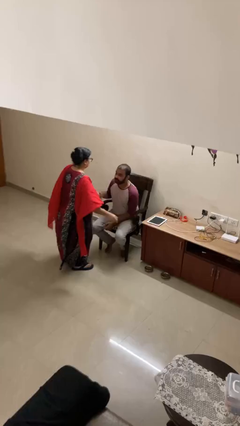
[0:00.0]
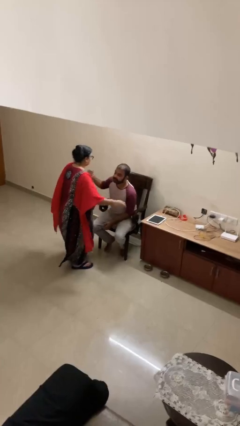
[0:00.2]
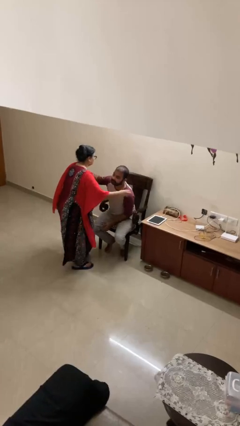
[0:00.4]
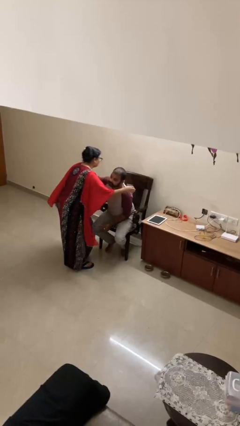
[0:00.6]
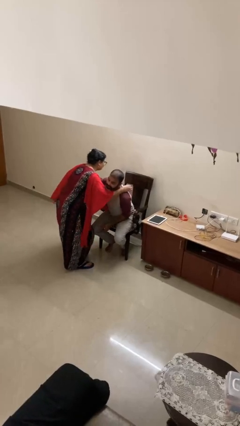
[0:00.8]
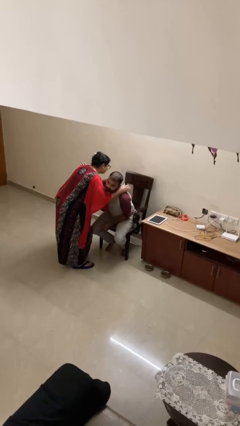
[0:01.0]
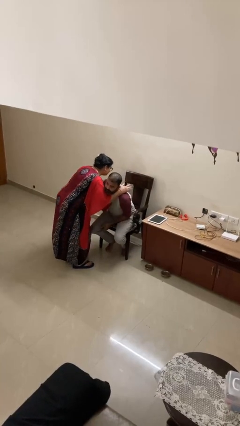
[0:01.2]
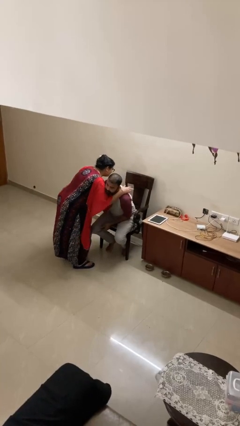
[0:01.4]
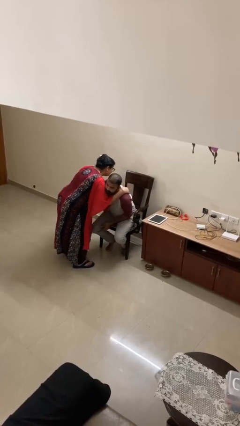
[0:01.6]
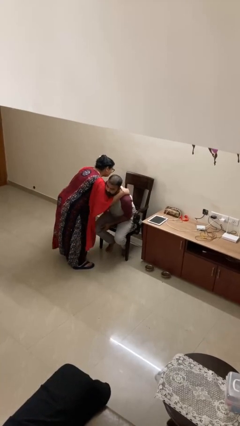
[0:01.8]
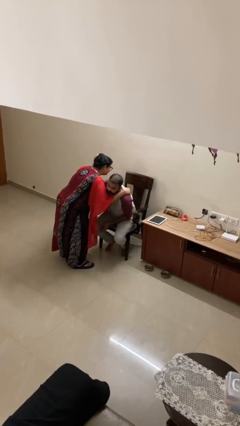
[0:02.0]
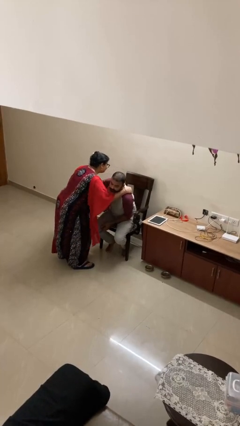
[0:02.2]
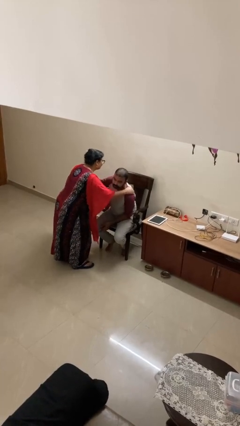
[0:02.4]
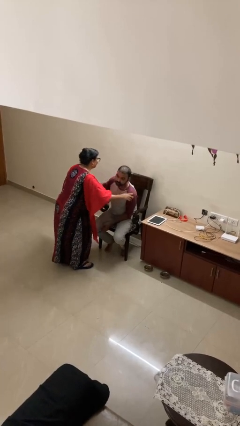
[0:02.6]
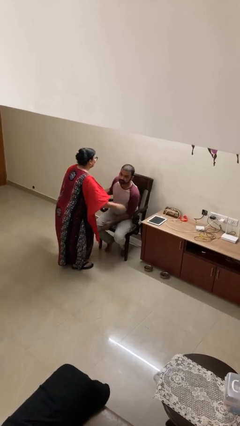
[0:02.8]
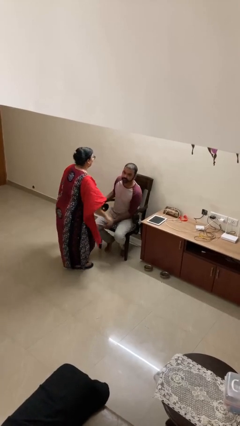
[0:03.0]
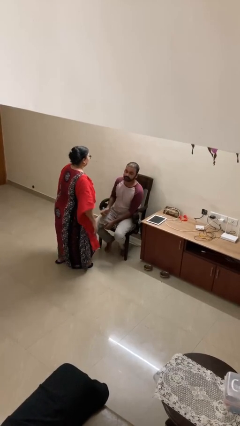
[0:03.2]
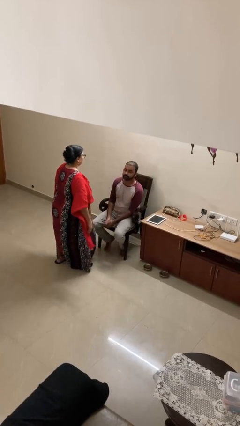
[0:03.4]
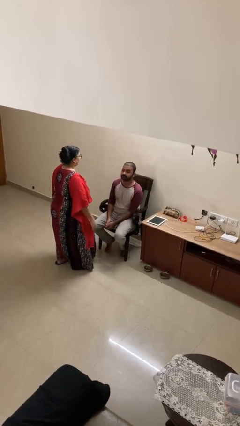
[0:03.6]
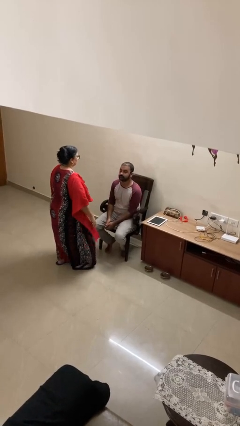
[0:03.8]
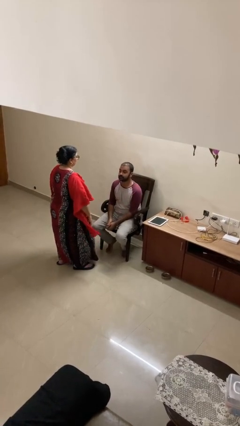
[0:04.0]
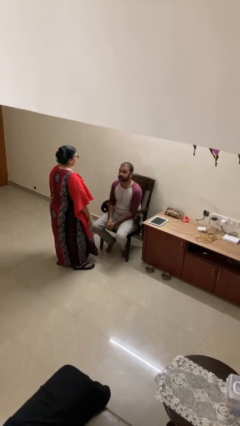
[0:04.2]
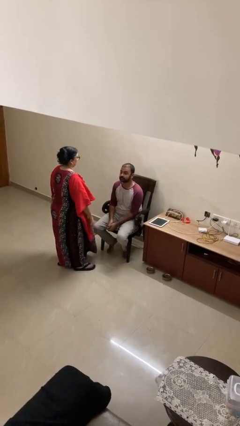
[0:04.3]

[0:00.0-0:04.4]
person embraces person

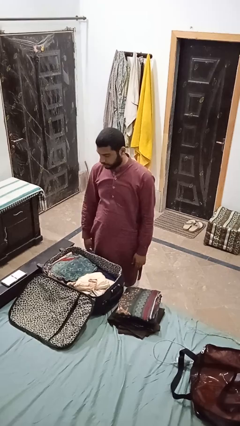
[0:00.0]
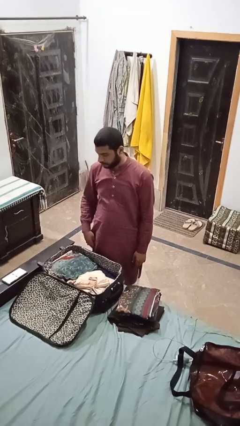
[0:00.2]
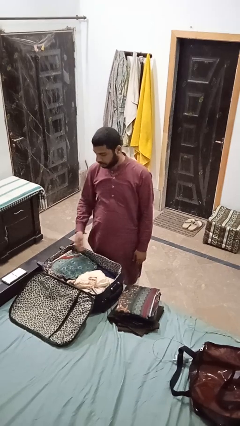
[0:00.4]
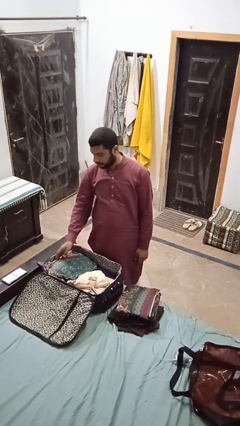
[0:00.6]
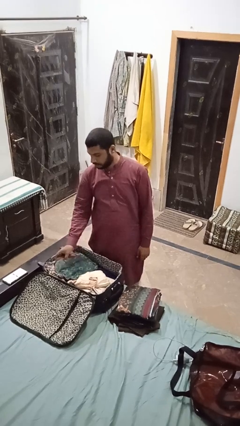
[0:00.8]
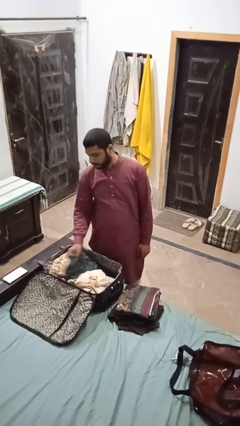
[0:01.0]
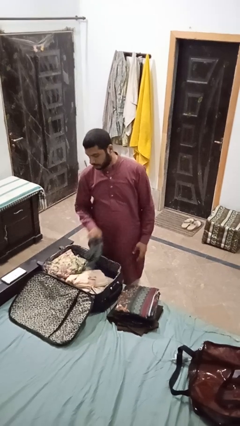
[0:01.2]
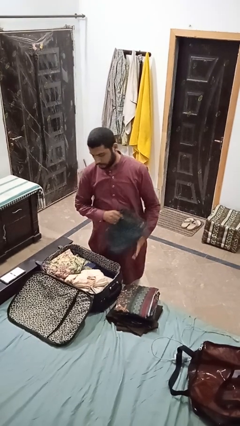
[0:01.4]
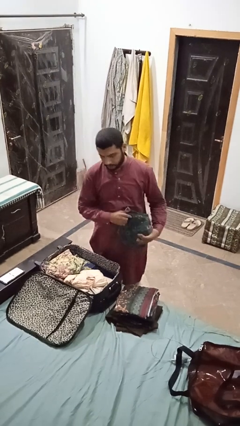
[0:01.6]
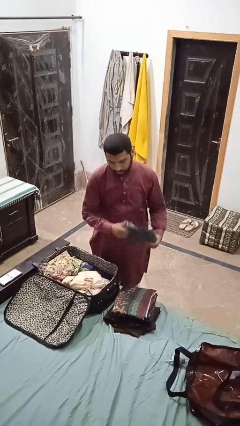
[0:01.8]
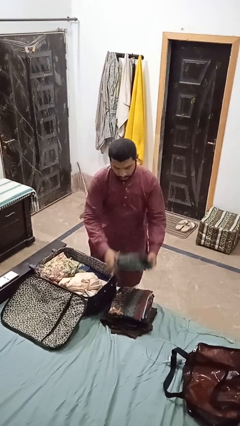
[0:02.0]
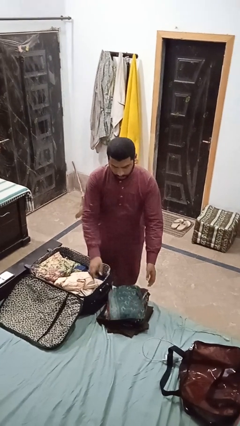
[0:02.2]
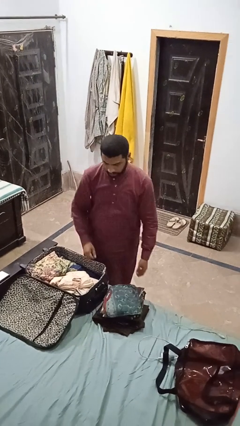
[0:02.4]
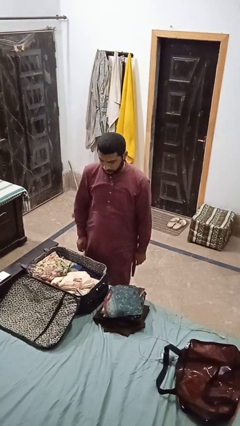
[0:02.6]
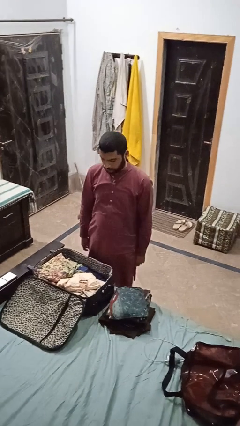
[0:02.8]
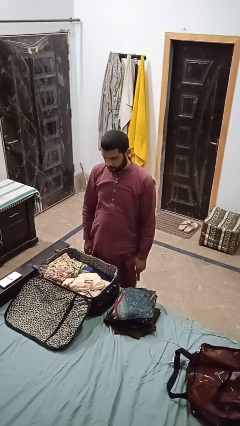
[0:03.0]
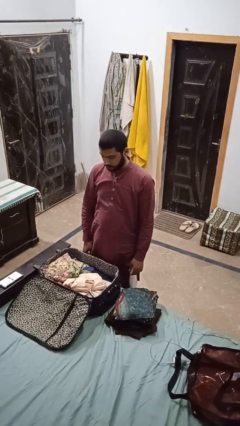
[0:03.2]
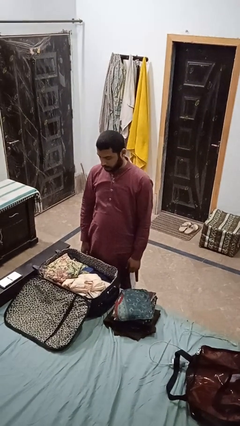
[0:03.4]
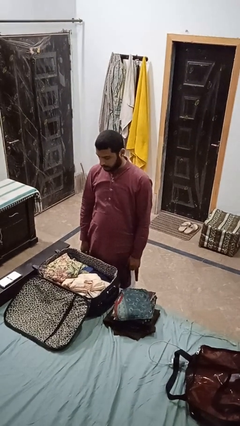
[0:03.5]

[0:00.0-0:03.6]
person unloads clothes from suitcase

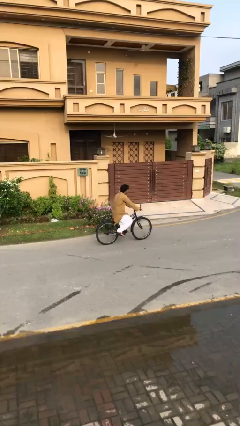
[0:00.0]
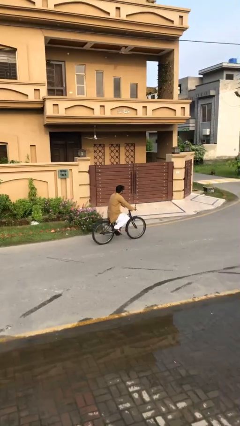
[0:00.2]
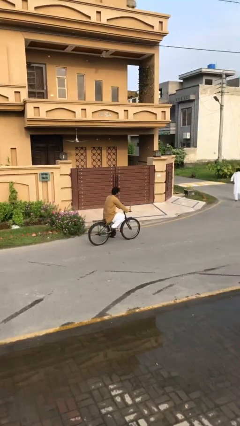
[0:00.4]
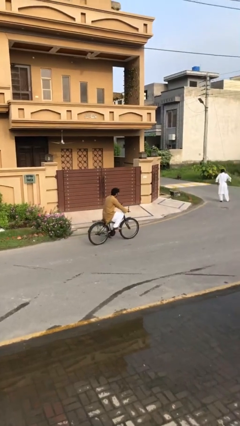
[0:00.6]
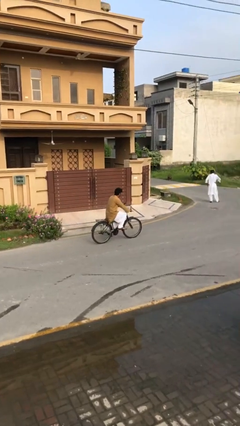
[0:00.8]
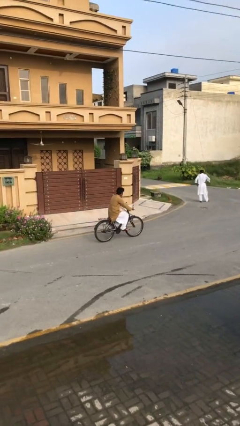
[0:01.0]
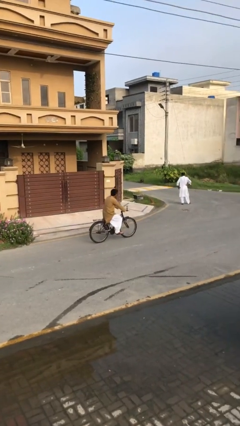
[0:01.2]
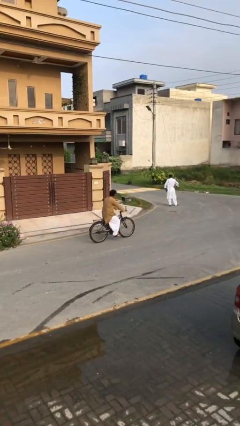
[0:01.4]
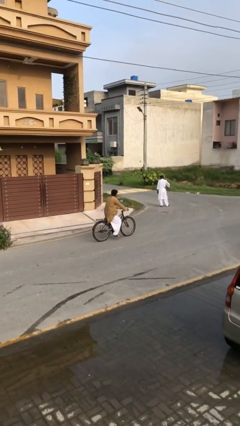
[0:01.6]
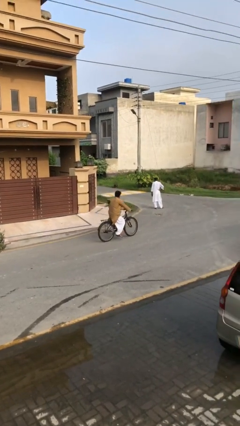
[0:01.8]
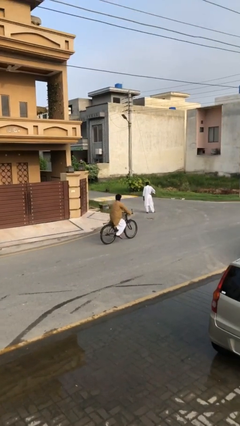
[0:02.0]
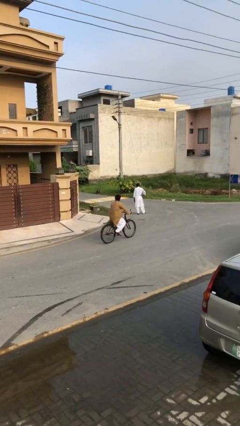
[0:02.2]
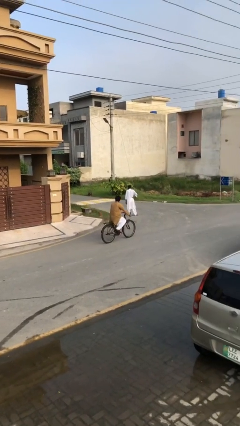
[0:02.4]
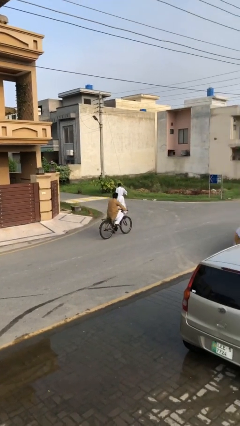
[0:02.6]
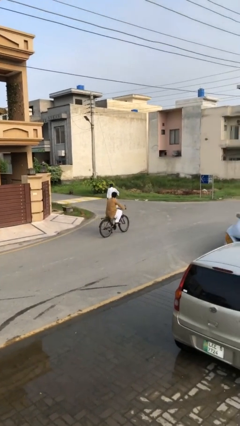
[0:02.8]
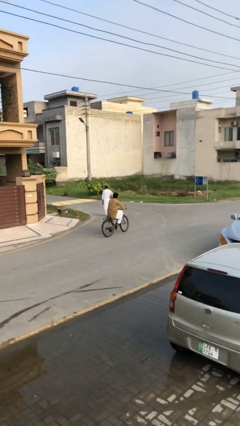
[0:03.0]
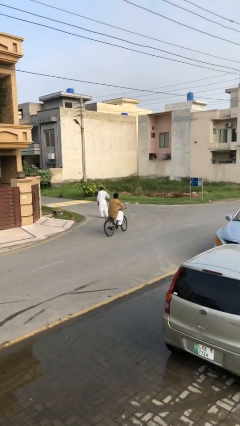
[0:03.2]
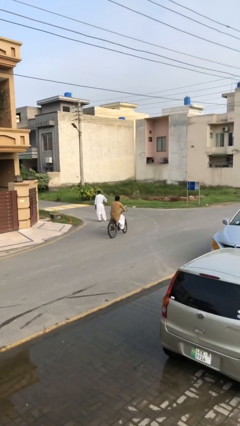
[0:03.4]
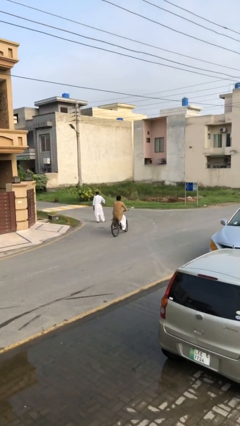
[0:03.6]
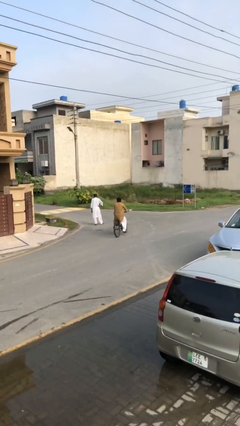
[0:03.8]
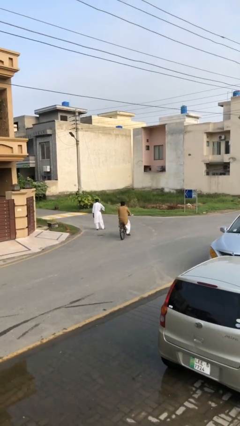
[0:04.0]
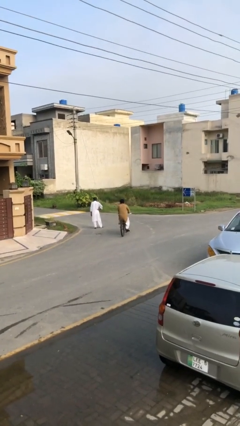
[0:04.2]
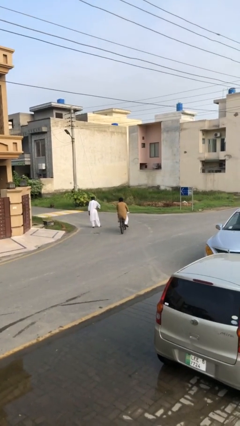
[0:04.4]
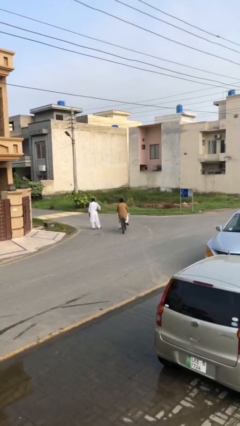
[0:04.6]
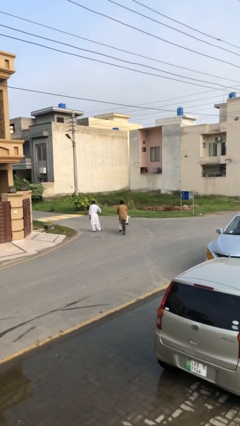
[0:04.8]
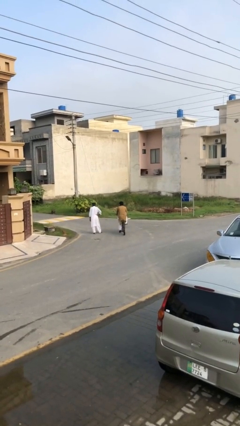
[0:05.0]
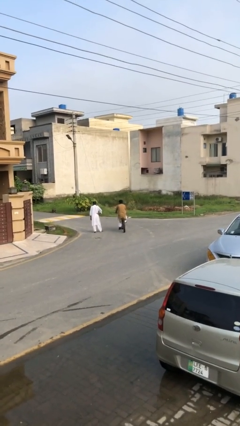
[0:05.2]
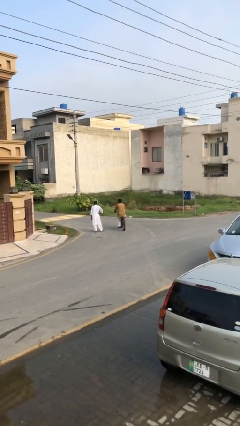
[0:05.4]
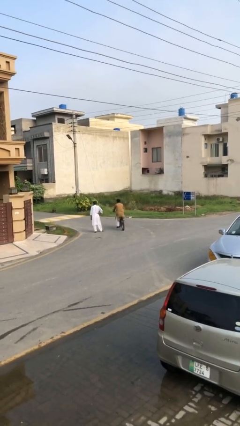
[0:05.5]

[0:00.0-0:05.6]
person rides bicycle

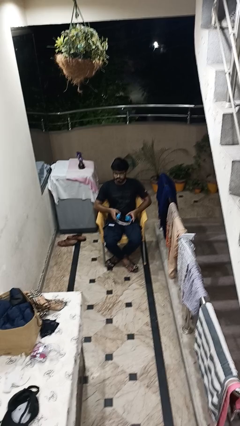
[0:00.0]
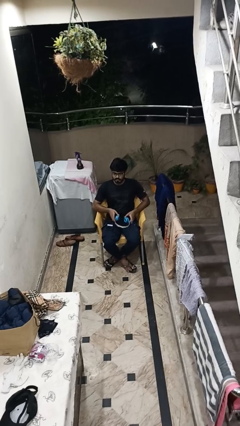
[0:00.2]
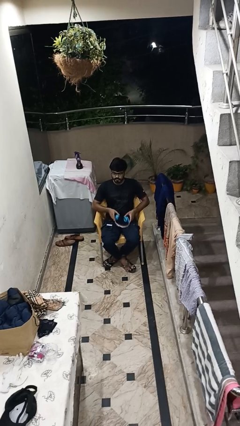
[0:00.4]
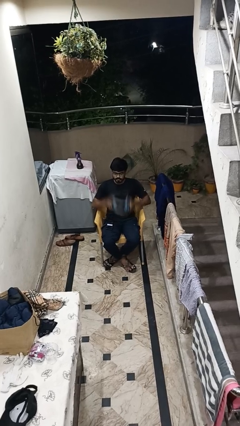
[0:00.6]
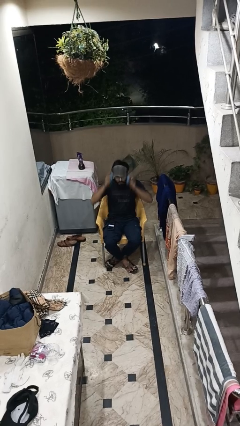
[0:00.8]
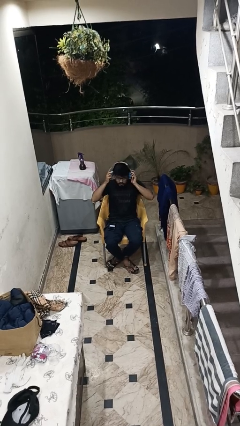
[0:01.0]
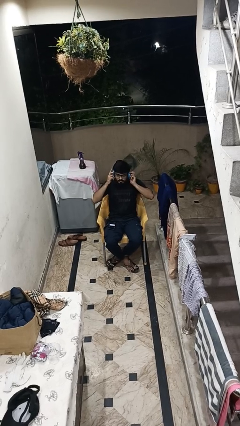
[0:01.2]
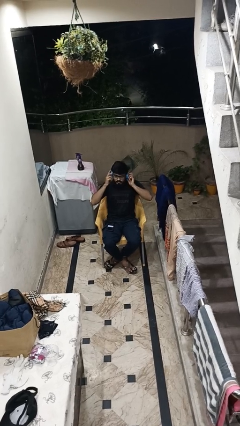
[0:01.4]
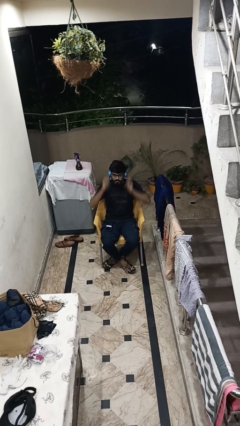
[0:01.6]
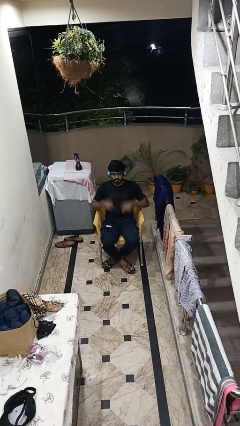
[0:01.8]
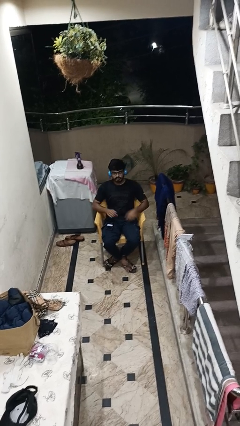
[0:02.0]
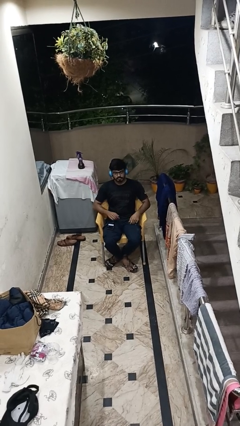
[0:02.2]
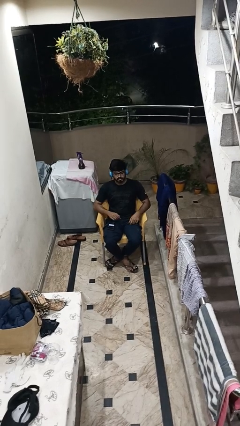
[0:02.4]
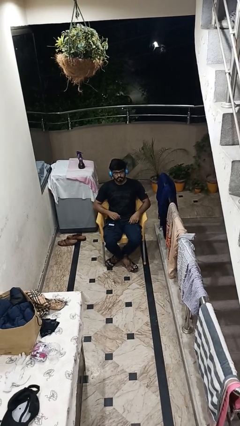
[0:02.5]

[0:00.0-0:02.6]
person puts on headphones

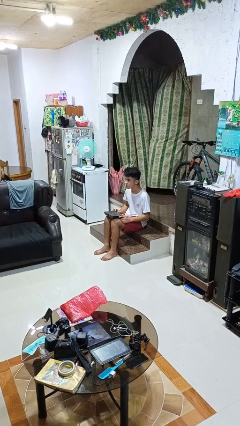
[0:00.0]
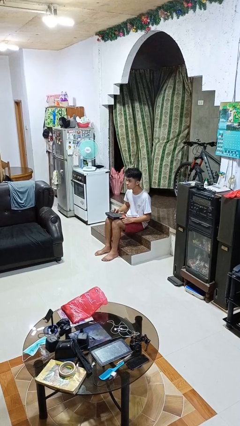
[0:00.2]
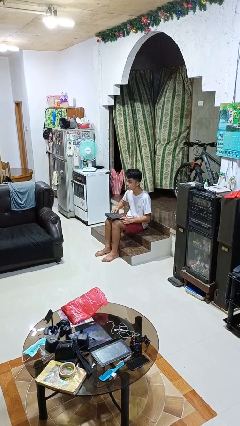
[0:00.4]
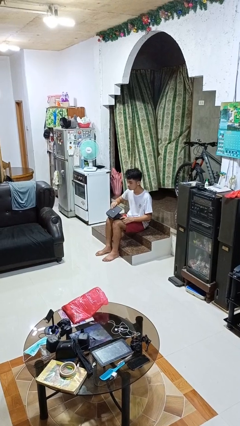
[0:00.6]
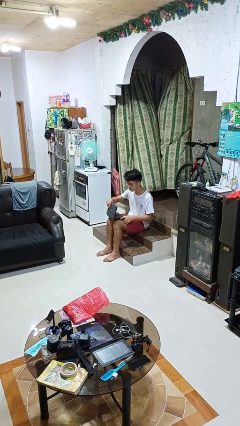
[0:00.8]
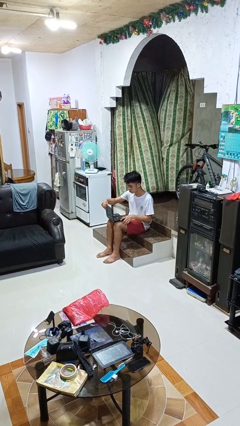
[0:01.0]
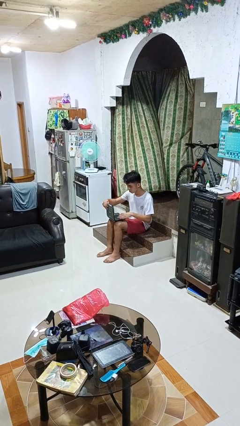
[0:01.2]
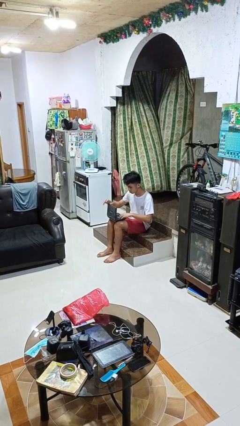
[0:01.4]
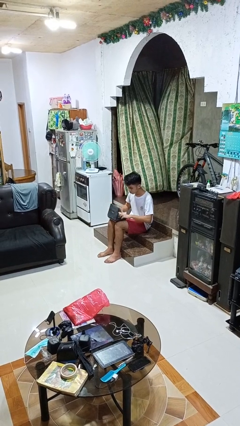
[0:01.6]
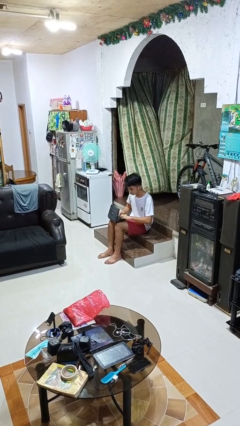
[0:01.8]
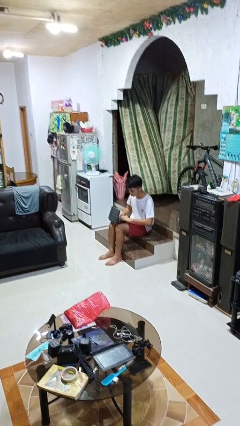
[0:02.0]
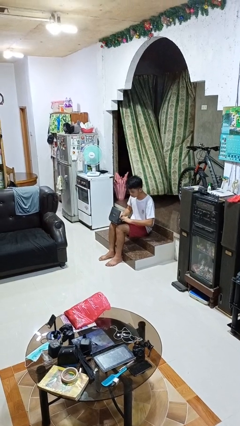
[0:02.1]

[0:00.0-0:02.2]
person opens laptop
